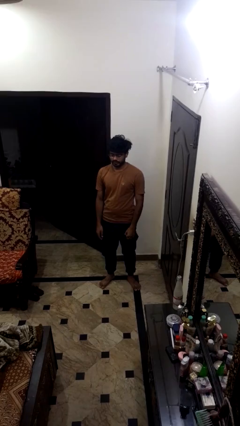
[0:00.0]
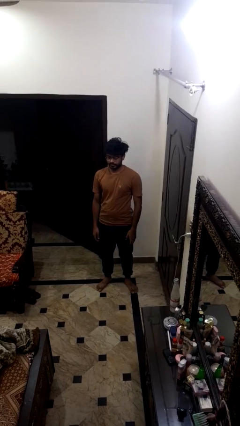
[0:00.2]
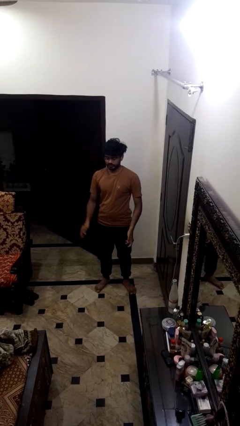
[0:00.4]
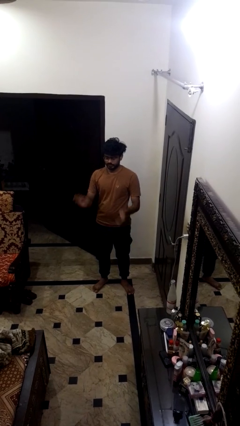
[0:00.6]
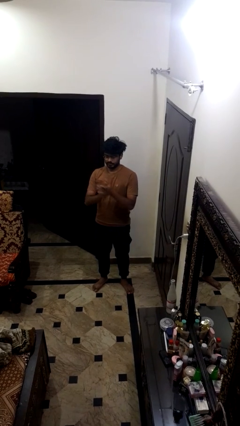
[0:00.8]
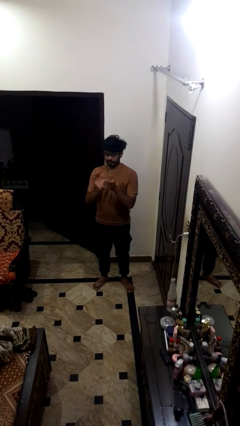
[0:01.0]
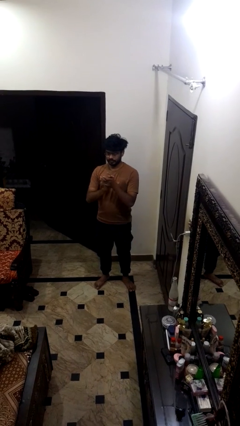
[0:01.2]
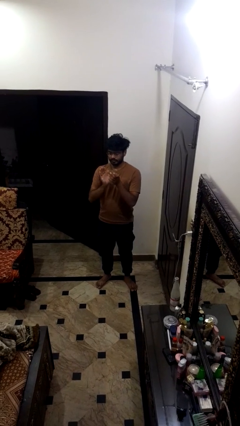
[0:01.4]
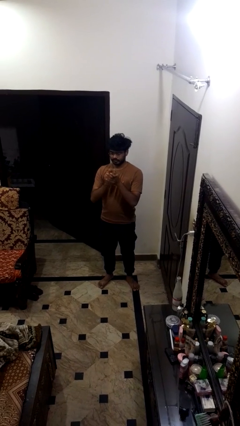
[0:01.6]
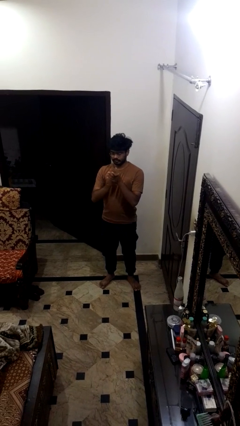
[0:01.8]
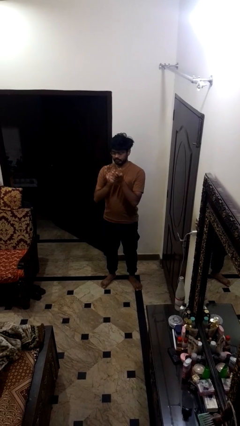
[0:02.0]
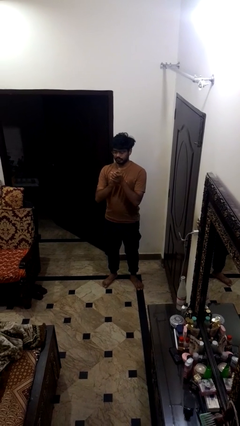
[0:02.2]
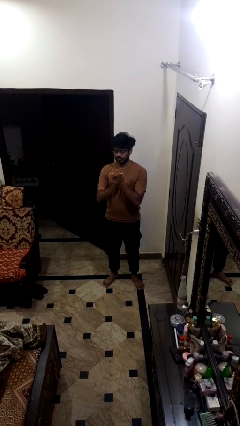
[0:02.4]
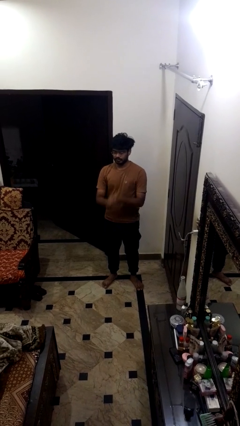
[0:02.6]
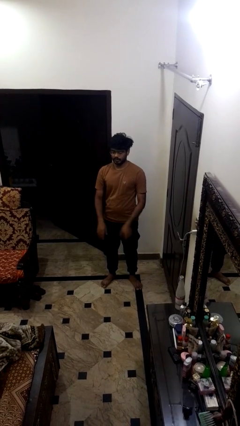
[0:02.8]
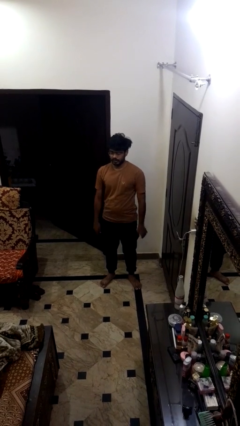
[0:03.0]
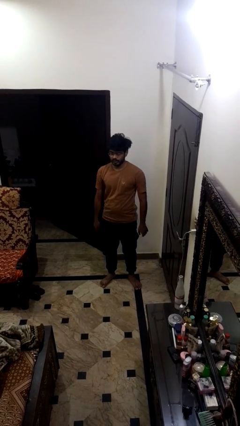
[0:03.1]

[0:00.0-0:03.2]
person claps hands

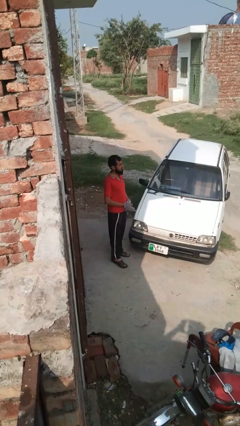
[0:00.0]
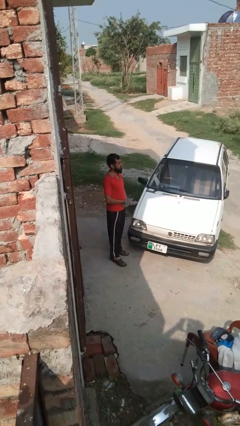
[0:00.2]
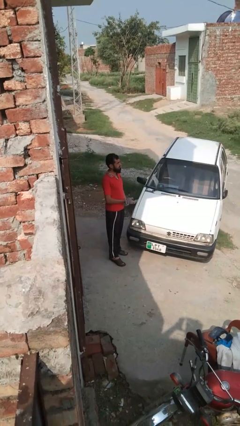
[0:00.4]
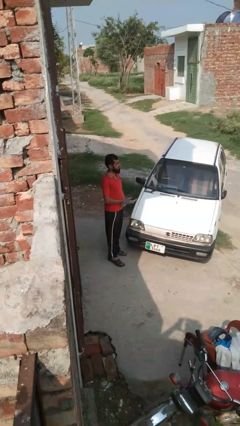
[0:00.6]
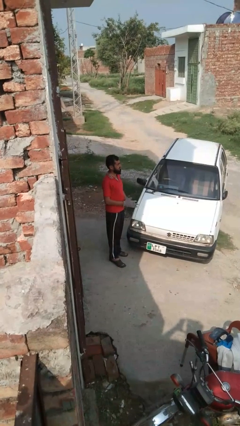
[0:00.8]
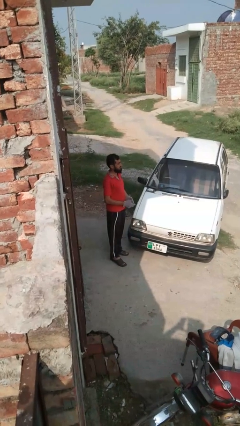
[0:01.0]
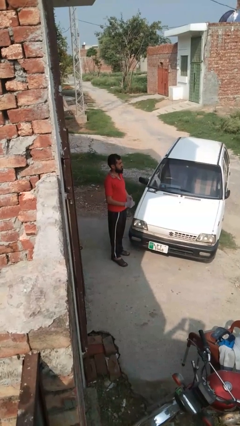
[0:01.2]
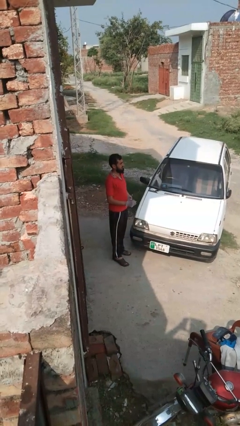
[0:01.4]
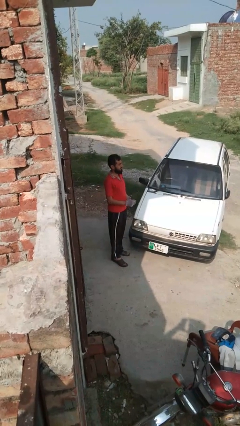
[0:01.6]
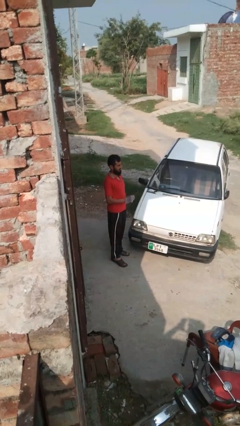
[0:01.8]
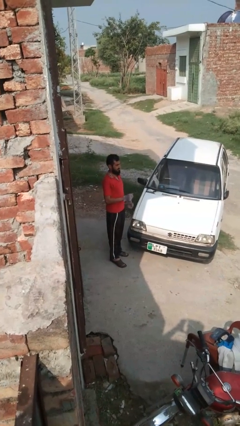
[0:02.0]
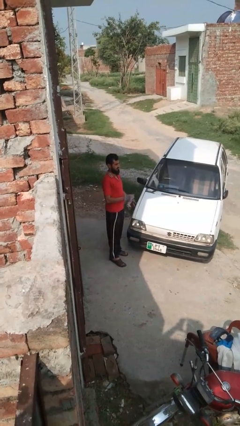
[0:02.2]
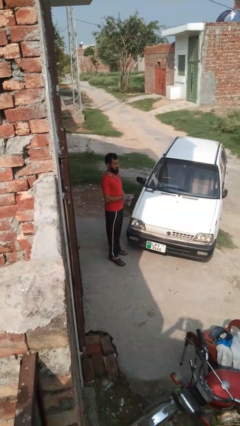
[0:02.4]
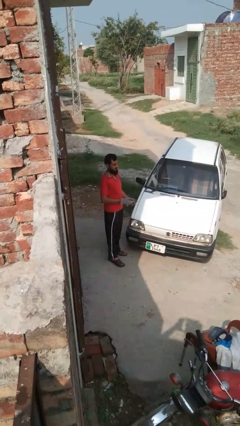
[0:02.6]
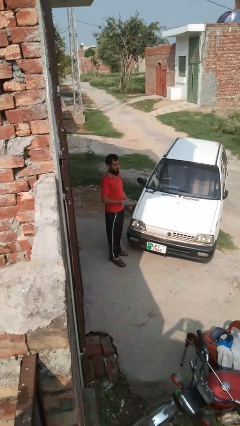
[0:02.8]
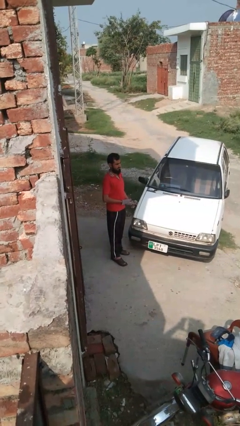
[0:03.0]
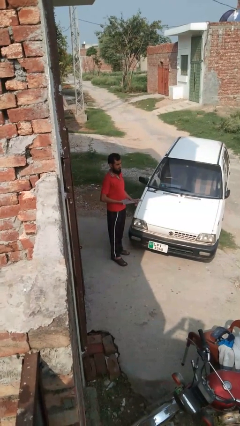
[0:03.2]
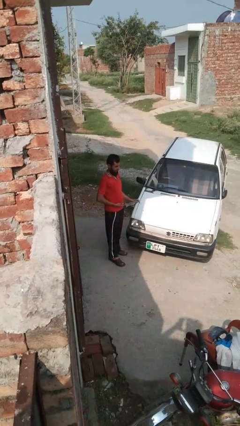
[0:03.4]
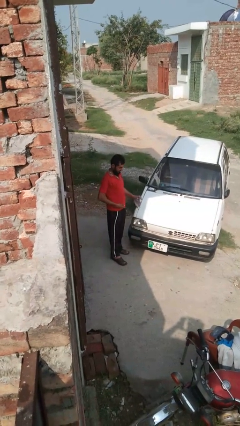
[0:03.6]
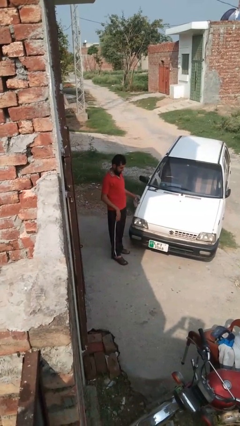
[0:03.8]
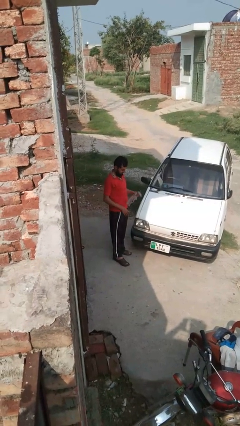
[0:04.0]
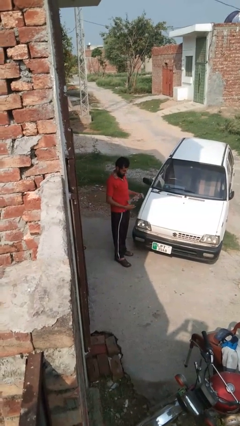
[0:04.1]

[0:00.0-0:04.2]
person takes off gloves

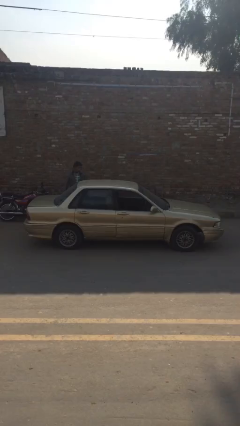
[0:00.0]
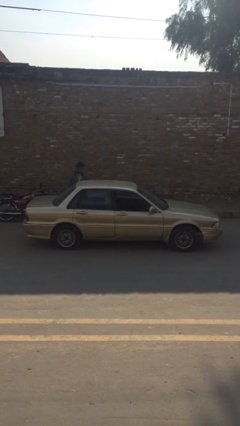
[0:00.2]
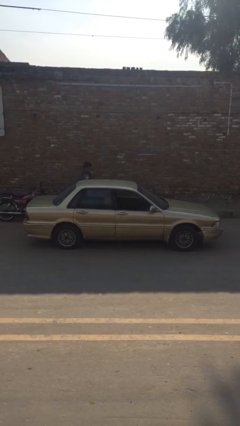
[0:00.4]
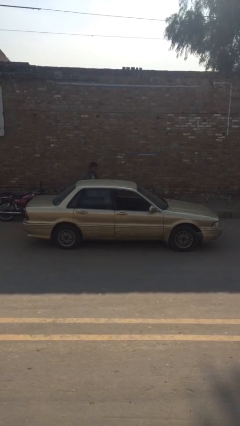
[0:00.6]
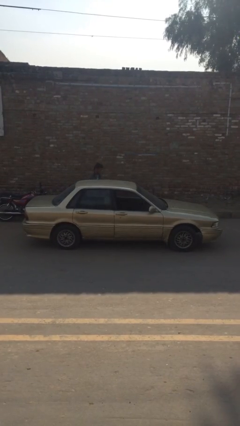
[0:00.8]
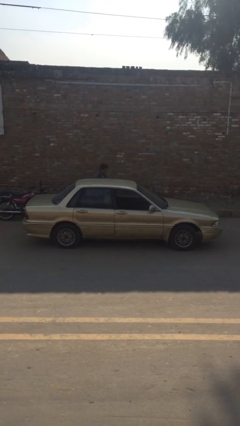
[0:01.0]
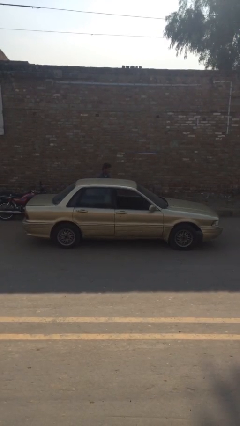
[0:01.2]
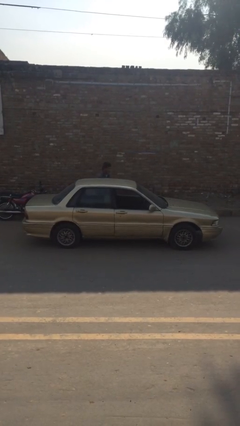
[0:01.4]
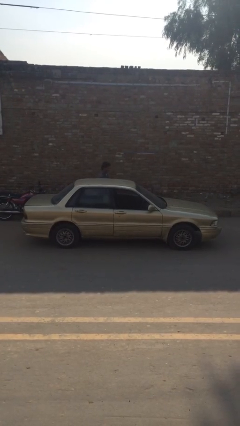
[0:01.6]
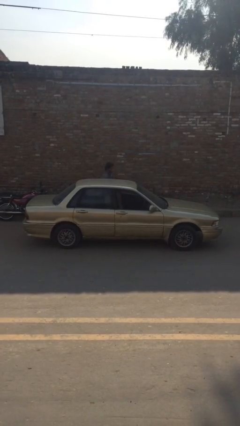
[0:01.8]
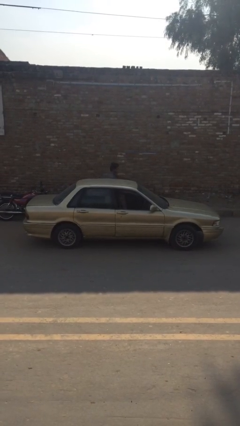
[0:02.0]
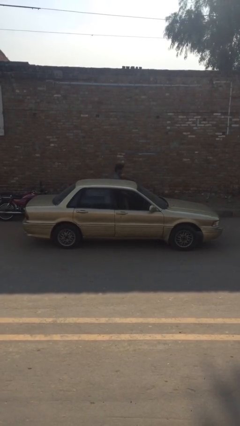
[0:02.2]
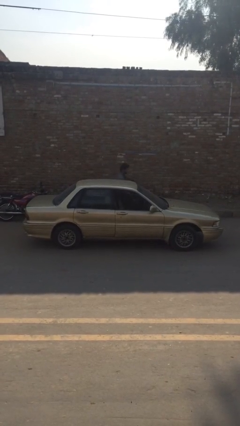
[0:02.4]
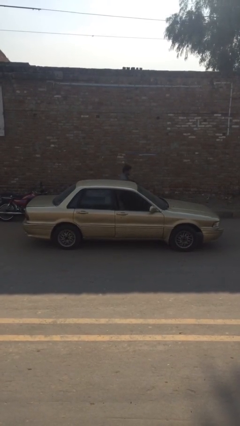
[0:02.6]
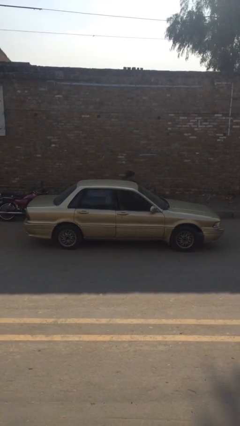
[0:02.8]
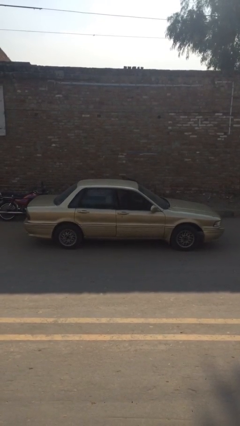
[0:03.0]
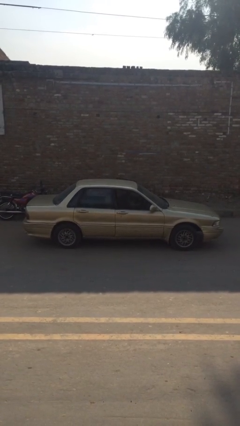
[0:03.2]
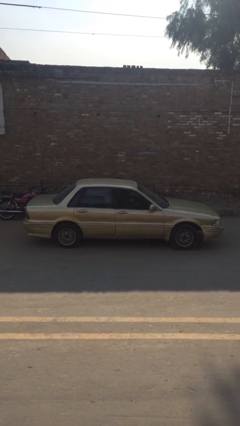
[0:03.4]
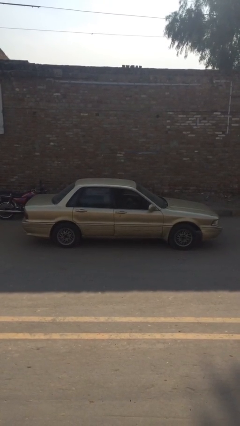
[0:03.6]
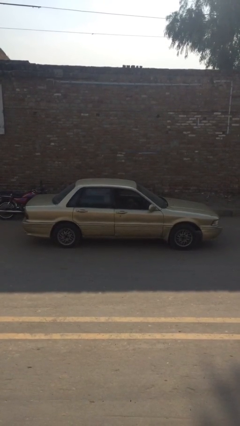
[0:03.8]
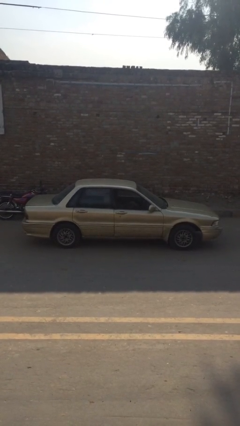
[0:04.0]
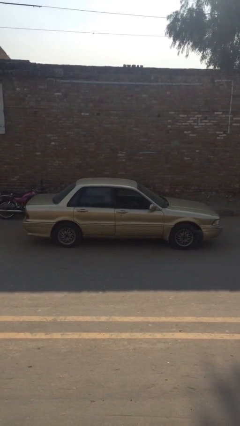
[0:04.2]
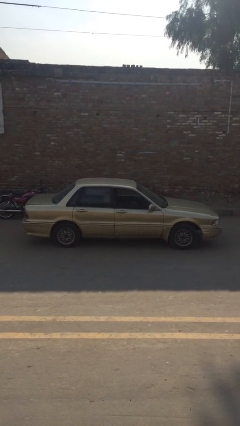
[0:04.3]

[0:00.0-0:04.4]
car picks up person

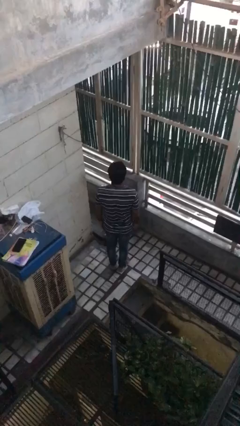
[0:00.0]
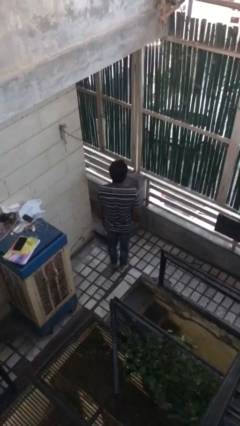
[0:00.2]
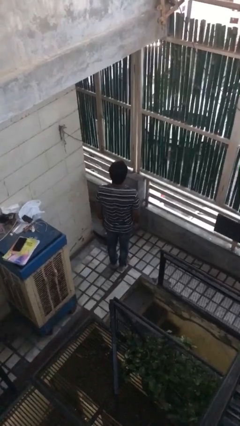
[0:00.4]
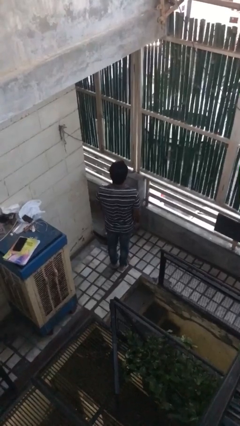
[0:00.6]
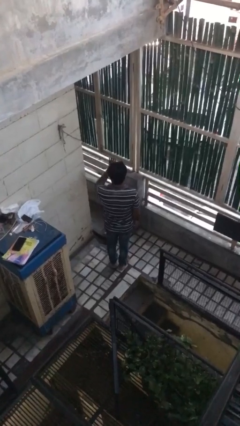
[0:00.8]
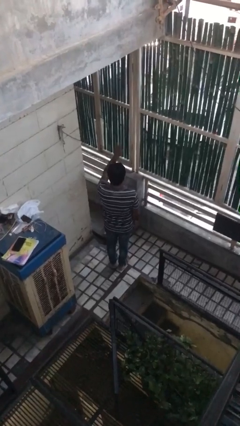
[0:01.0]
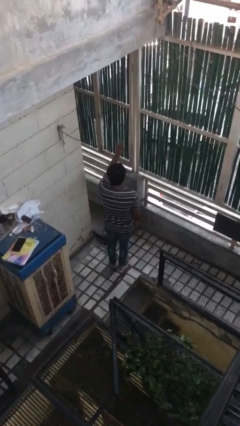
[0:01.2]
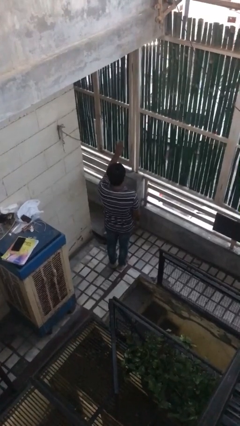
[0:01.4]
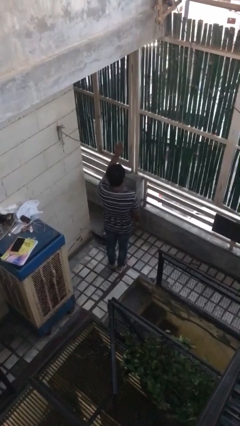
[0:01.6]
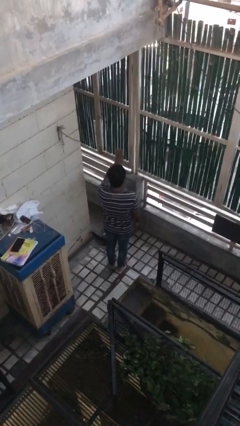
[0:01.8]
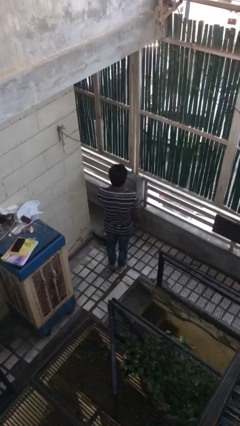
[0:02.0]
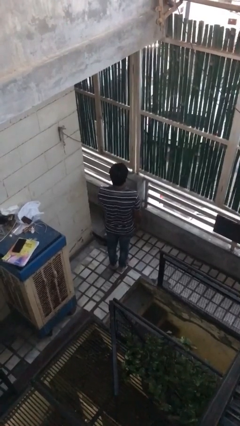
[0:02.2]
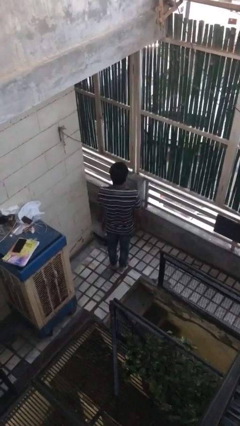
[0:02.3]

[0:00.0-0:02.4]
person gestures stop

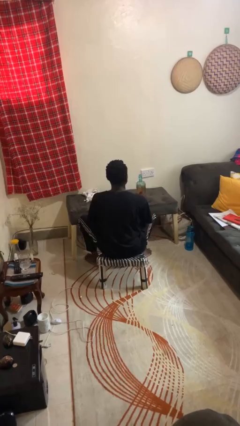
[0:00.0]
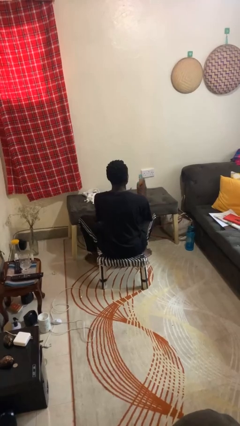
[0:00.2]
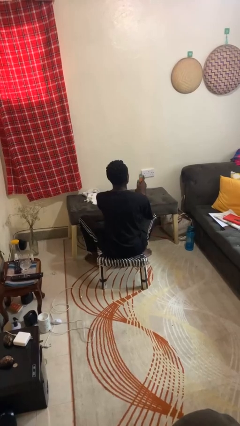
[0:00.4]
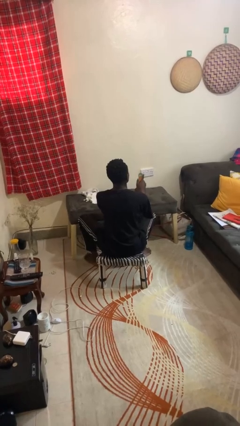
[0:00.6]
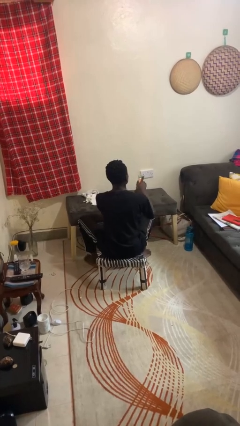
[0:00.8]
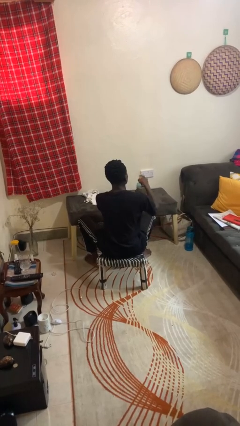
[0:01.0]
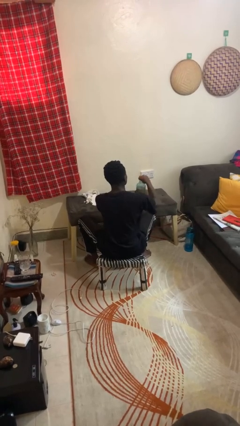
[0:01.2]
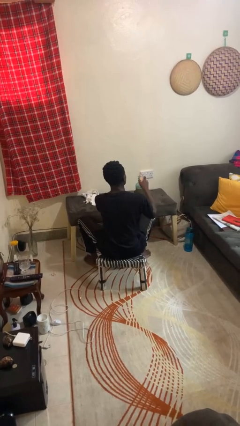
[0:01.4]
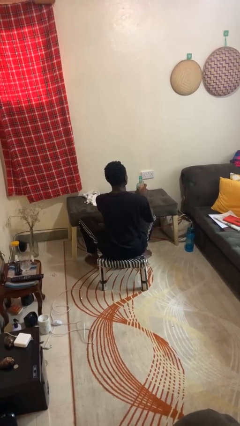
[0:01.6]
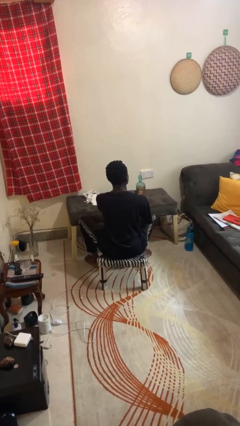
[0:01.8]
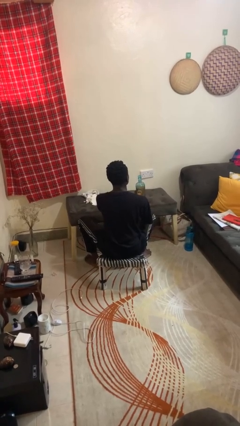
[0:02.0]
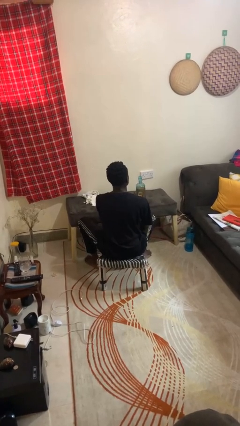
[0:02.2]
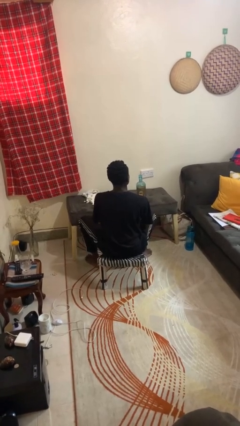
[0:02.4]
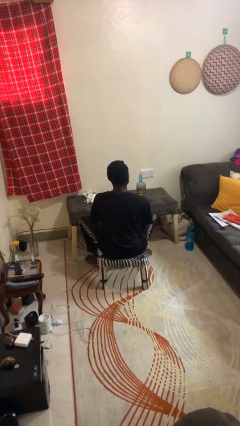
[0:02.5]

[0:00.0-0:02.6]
person opens can with can opener

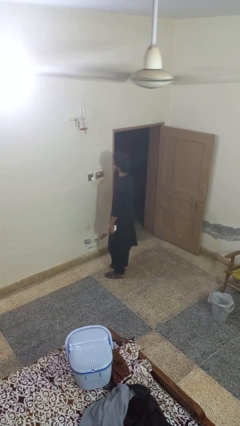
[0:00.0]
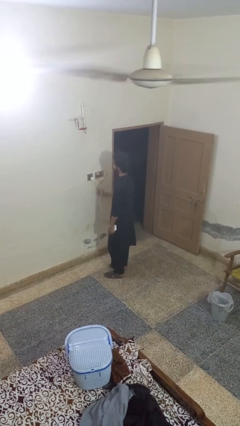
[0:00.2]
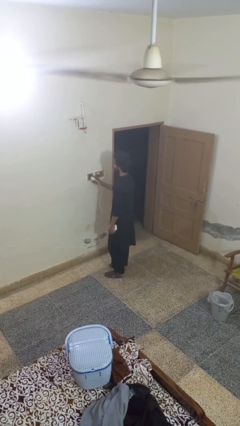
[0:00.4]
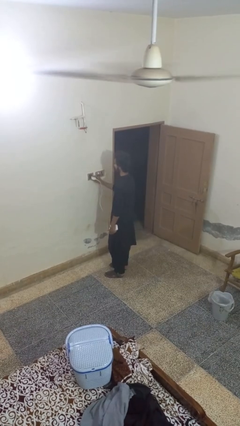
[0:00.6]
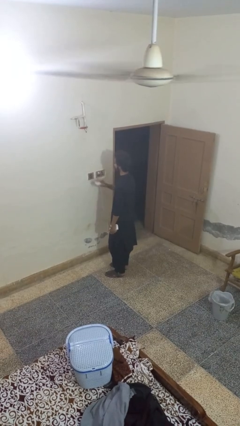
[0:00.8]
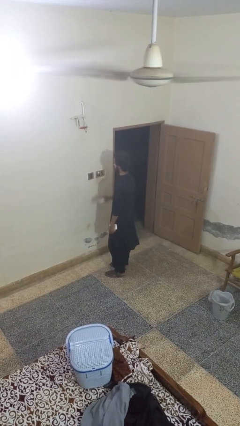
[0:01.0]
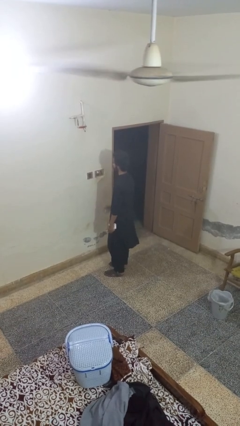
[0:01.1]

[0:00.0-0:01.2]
person unplugs from electrical socket
